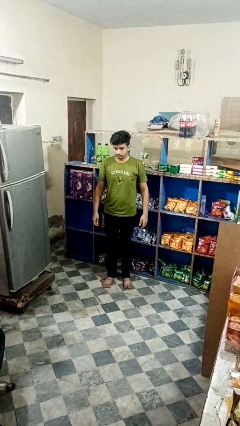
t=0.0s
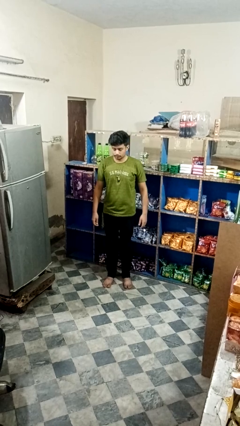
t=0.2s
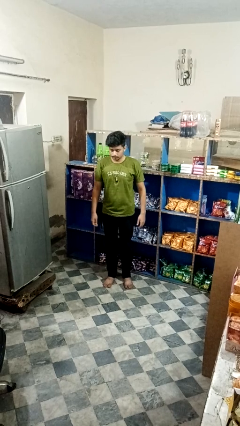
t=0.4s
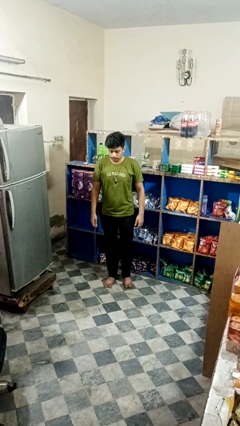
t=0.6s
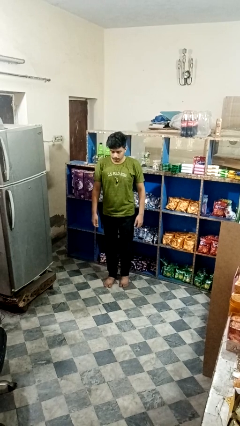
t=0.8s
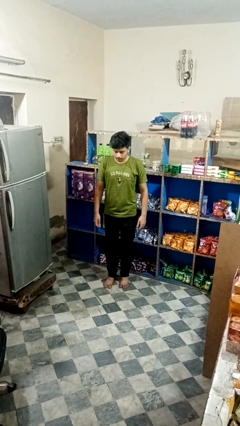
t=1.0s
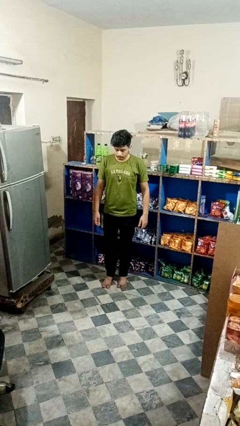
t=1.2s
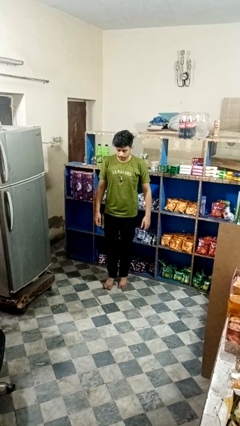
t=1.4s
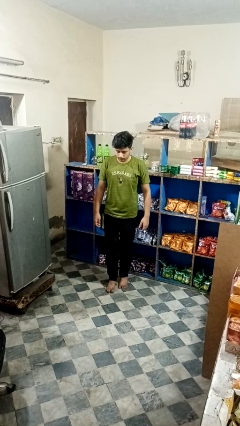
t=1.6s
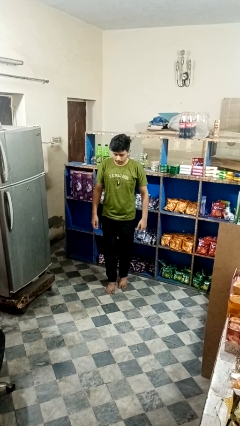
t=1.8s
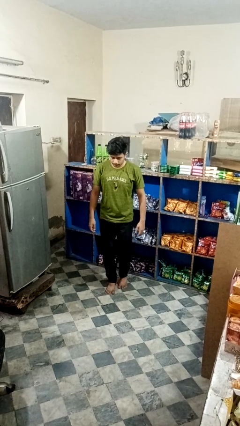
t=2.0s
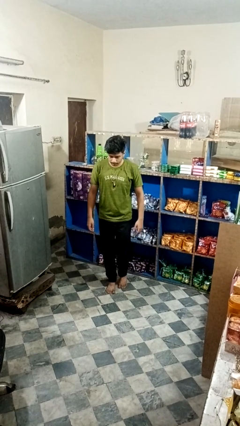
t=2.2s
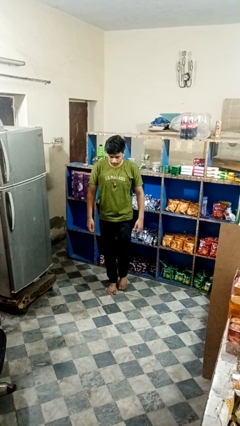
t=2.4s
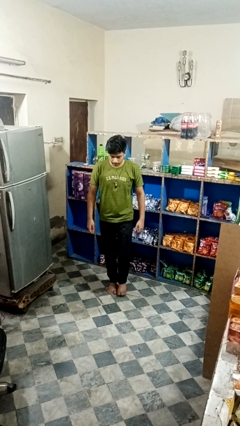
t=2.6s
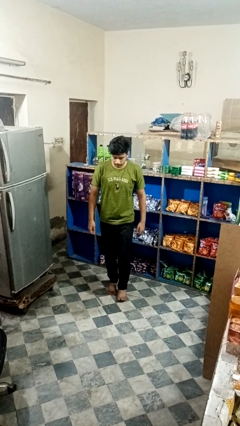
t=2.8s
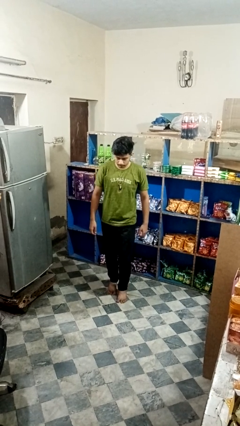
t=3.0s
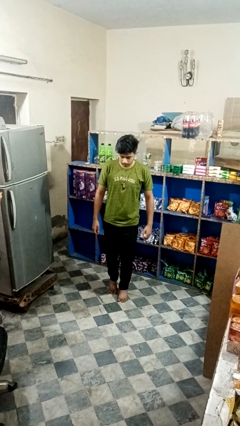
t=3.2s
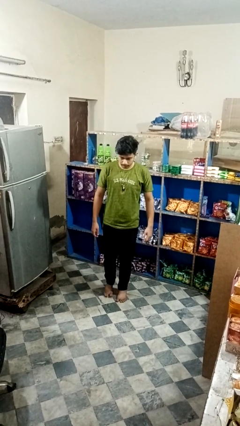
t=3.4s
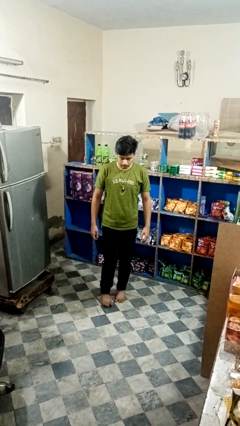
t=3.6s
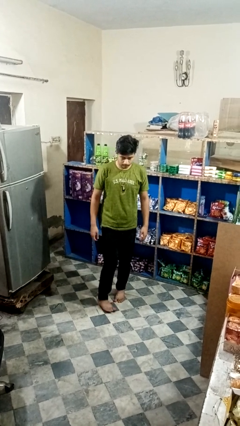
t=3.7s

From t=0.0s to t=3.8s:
person walks tiptoe

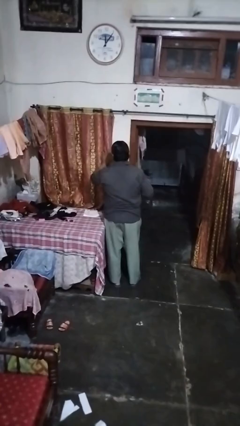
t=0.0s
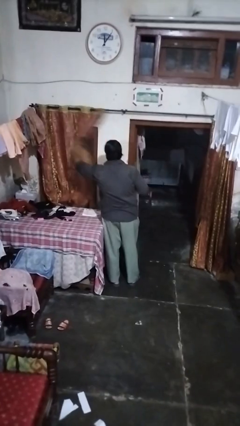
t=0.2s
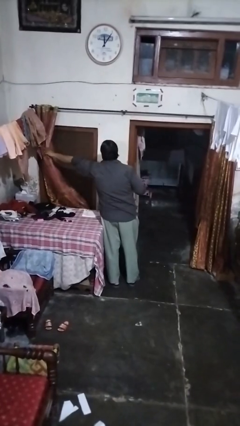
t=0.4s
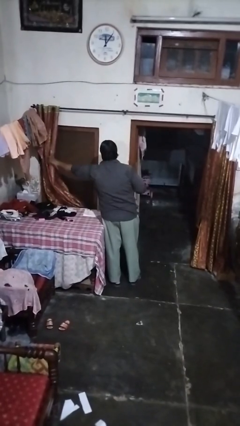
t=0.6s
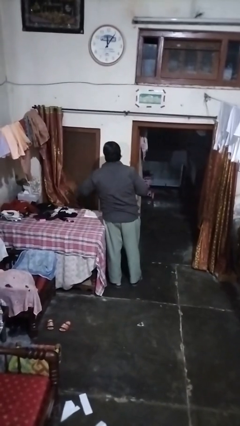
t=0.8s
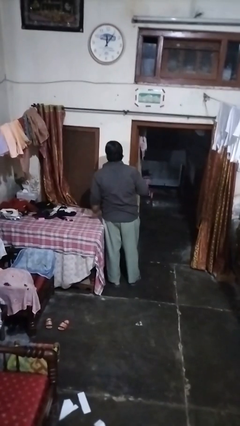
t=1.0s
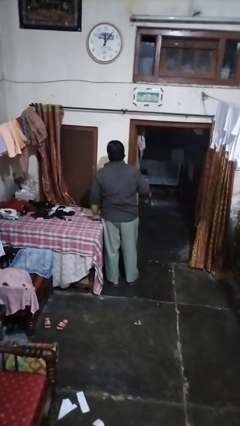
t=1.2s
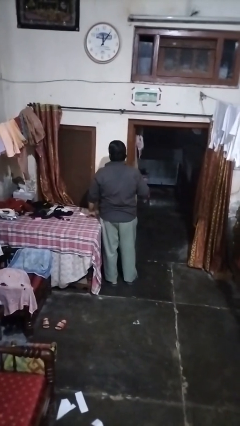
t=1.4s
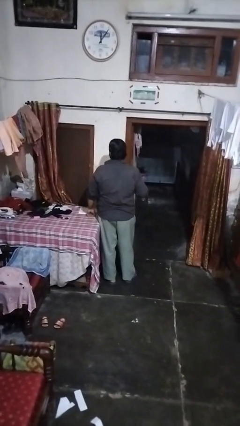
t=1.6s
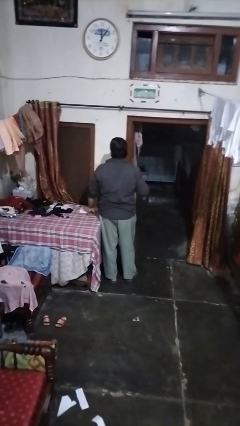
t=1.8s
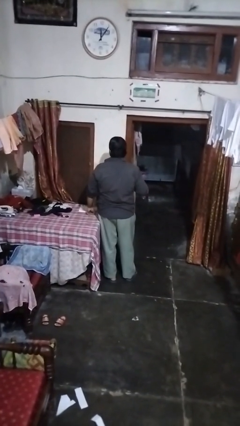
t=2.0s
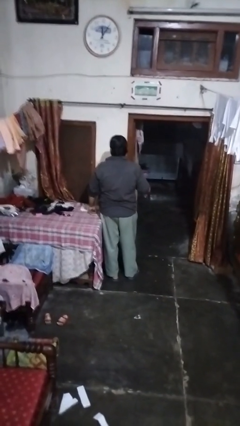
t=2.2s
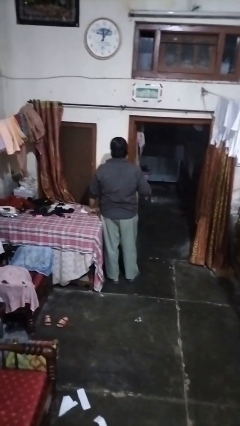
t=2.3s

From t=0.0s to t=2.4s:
person opens curtains

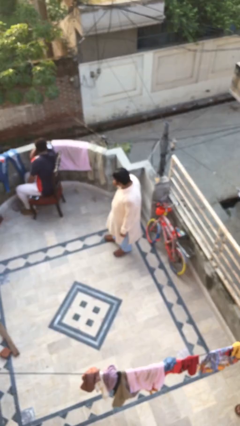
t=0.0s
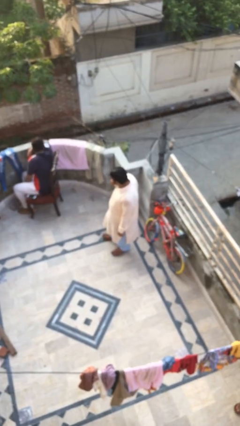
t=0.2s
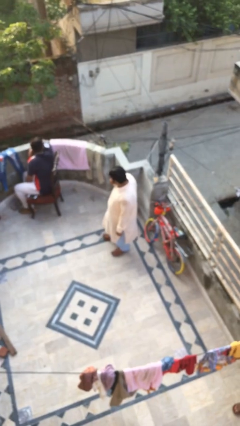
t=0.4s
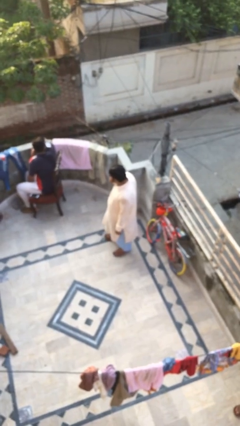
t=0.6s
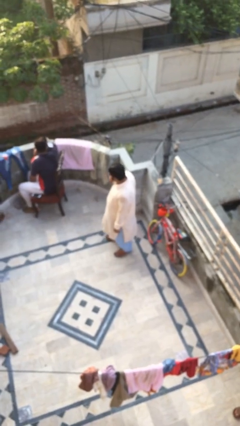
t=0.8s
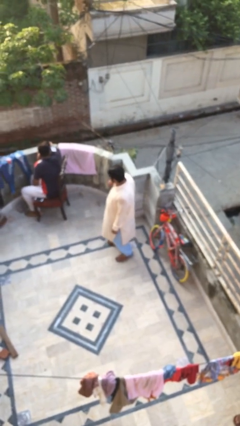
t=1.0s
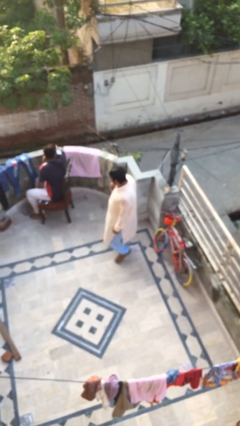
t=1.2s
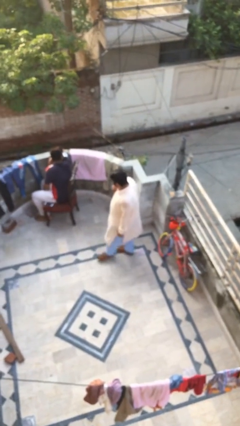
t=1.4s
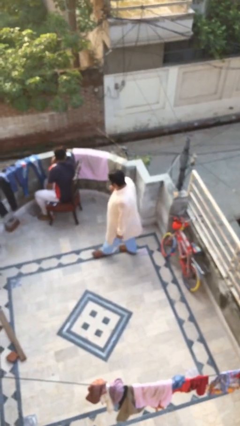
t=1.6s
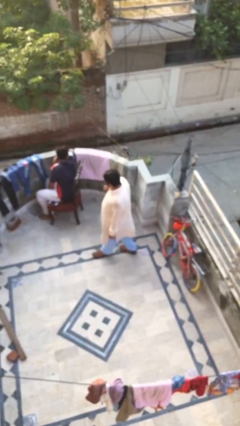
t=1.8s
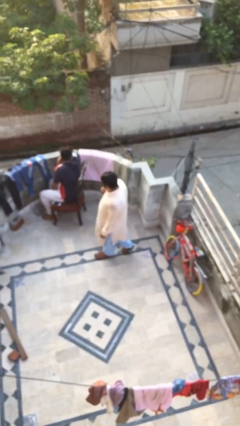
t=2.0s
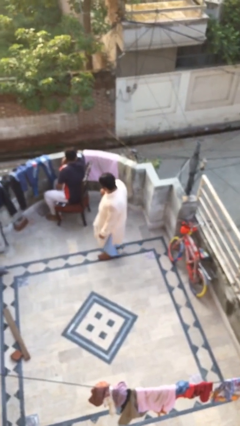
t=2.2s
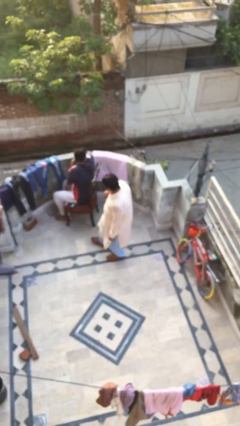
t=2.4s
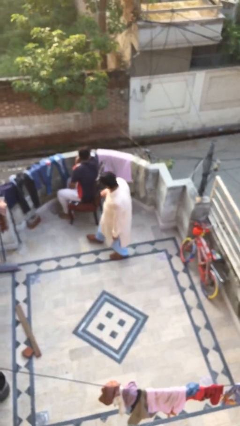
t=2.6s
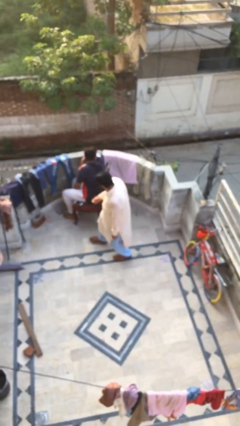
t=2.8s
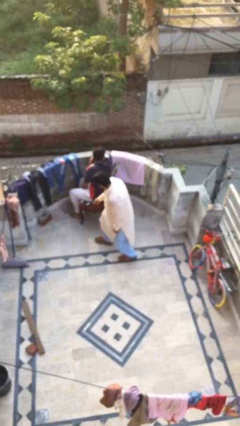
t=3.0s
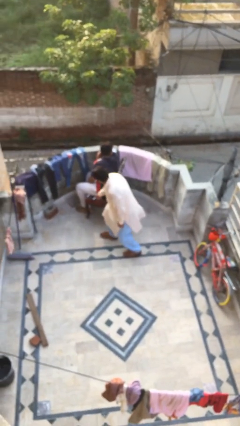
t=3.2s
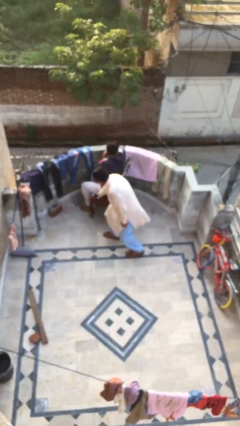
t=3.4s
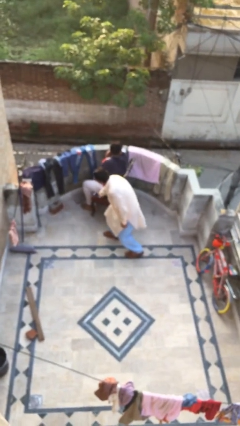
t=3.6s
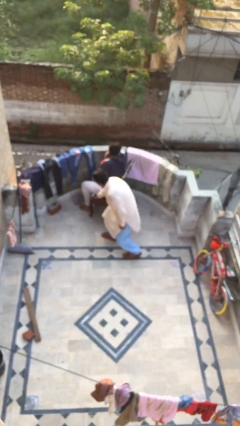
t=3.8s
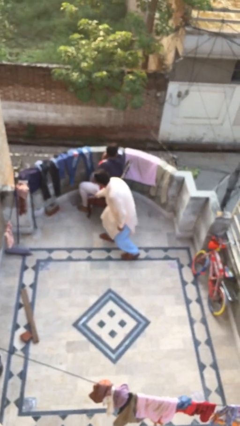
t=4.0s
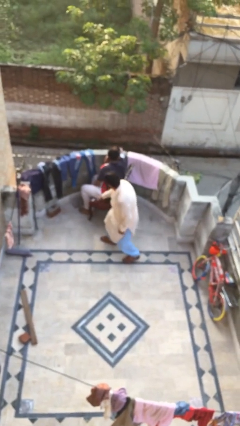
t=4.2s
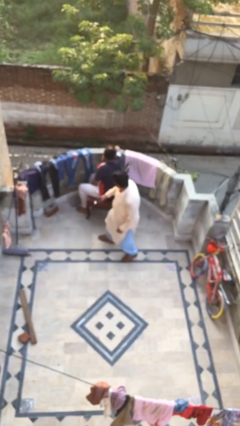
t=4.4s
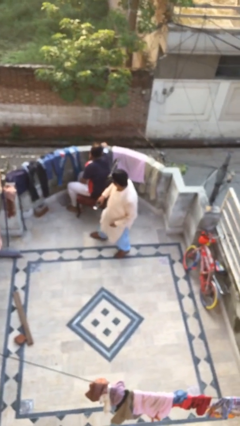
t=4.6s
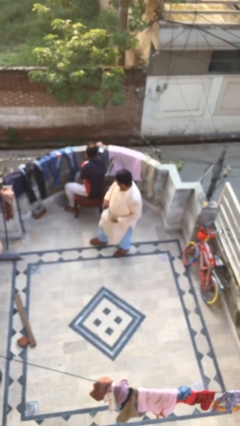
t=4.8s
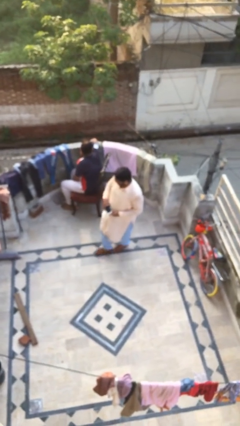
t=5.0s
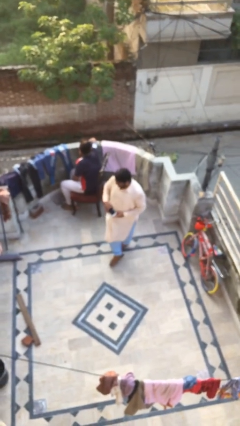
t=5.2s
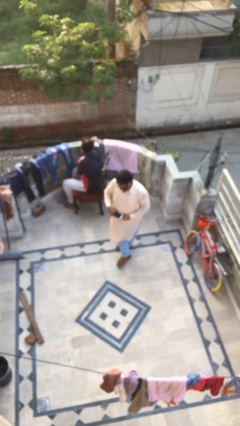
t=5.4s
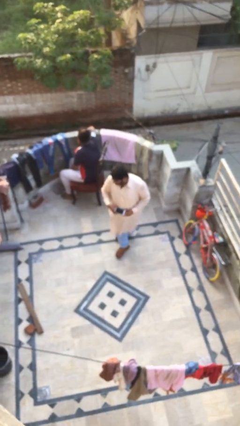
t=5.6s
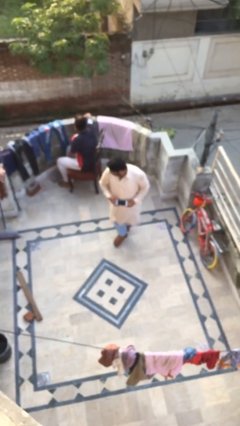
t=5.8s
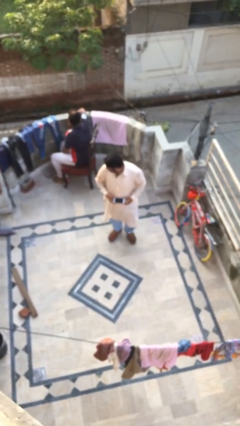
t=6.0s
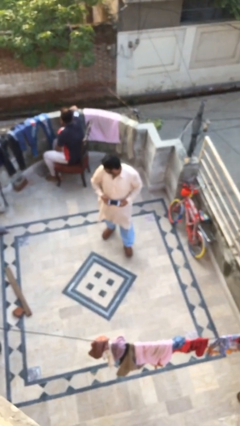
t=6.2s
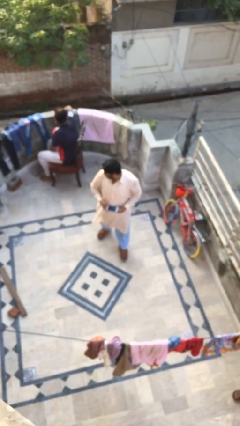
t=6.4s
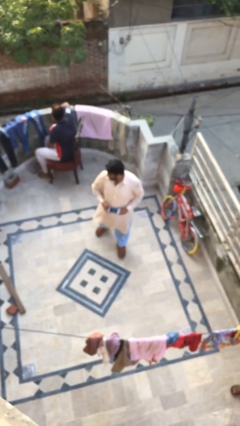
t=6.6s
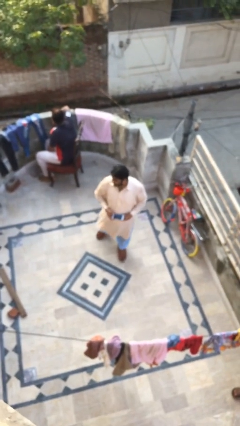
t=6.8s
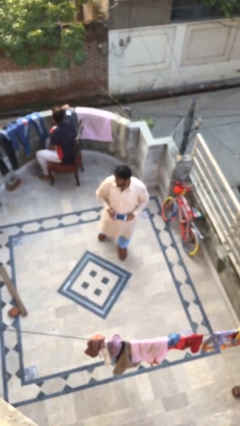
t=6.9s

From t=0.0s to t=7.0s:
person steals object from person

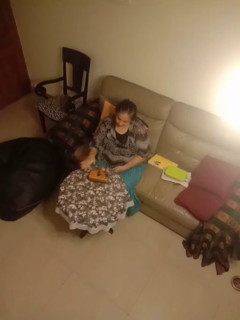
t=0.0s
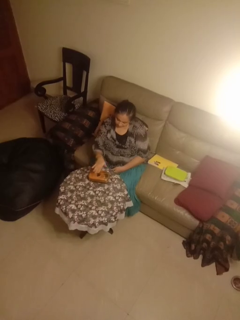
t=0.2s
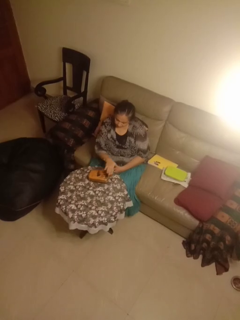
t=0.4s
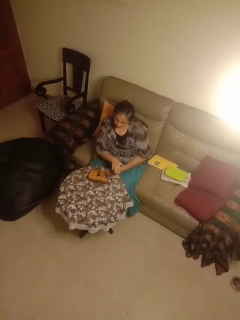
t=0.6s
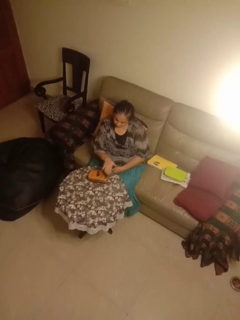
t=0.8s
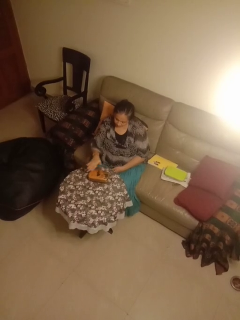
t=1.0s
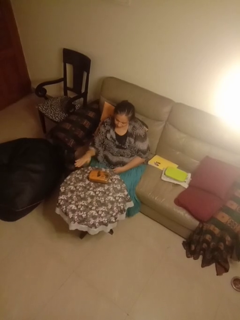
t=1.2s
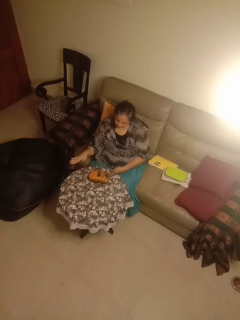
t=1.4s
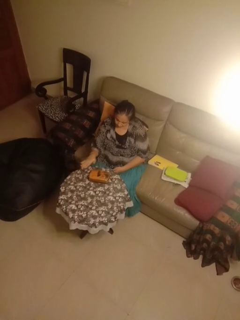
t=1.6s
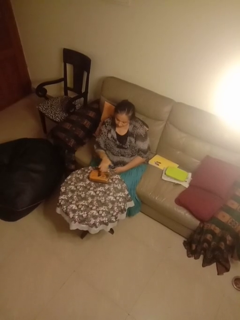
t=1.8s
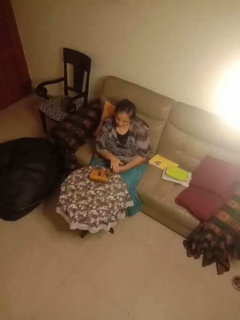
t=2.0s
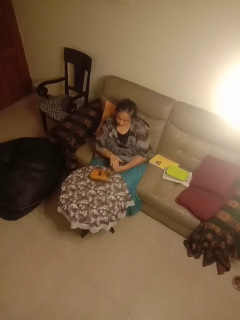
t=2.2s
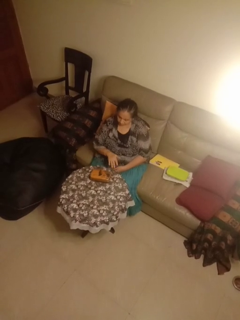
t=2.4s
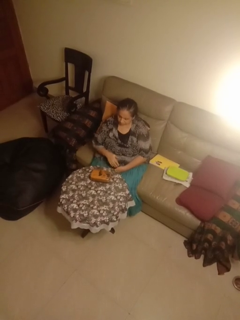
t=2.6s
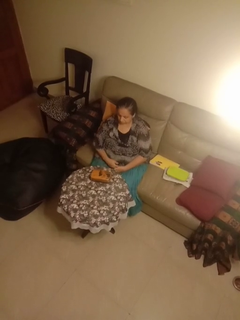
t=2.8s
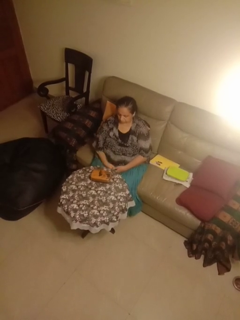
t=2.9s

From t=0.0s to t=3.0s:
person waves hand over object

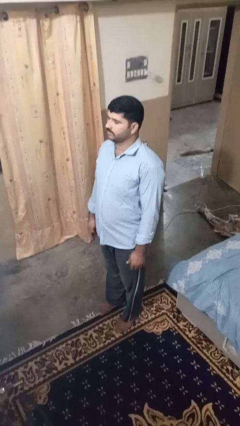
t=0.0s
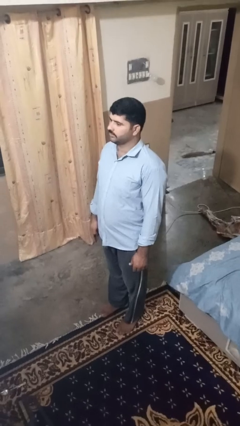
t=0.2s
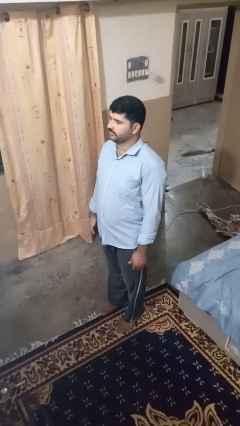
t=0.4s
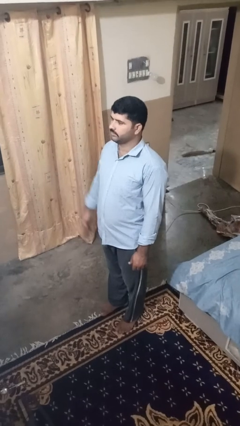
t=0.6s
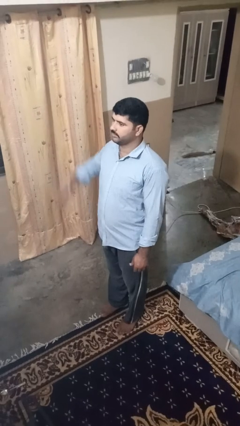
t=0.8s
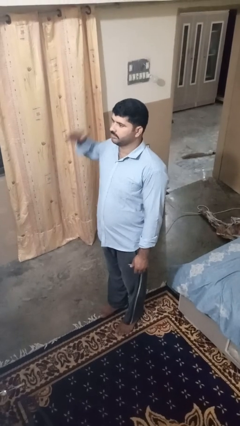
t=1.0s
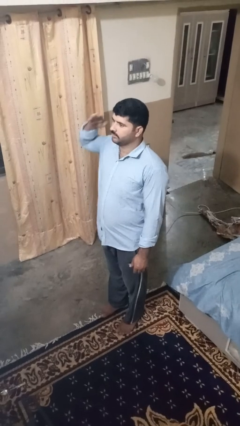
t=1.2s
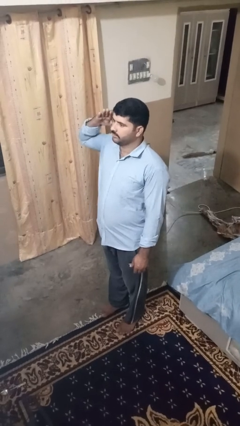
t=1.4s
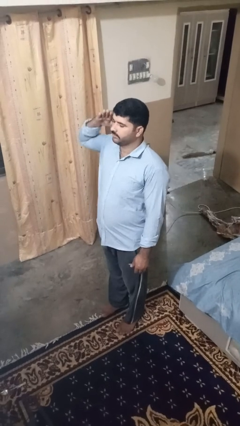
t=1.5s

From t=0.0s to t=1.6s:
person salutes

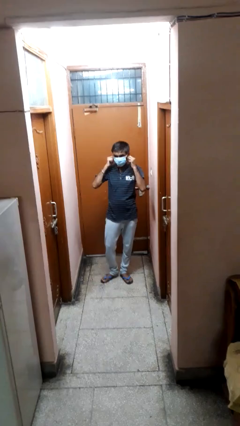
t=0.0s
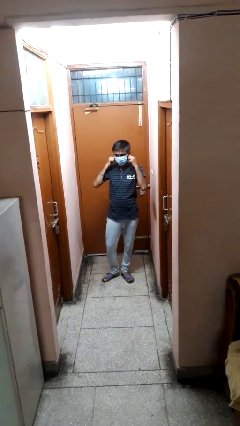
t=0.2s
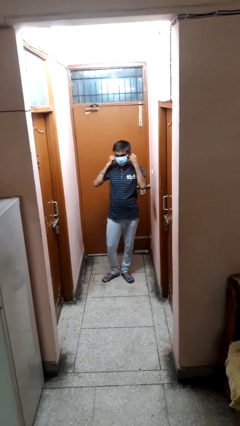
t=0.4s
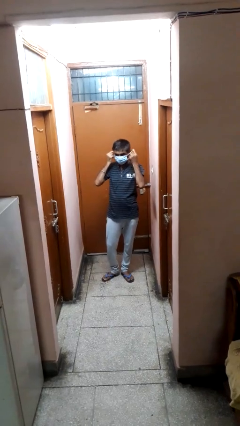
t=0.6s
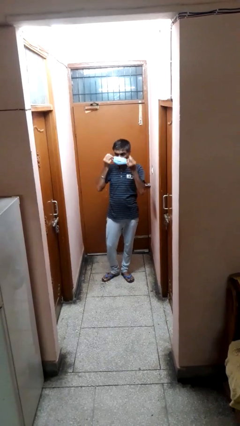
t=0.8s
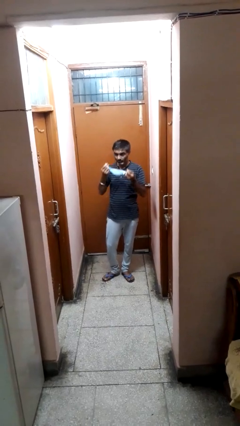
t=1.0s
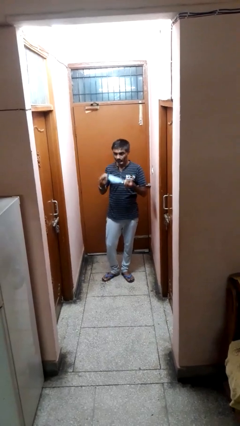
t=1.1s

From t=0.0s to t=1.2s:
person takes off facemask
